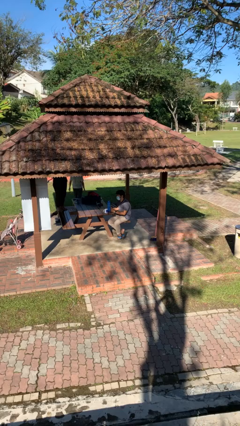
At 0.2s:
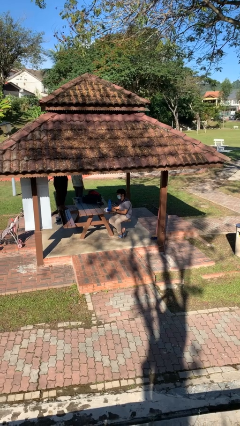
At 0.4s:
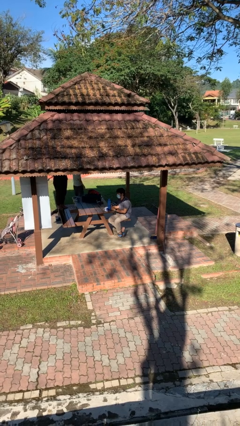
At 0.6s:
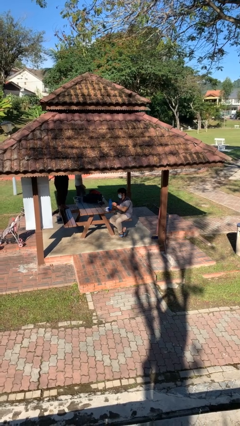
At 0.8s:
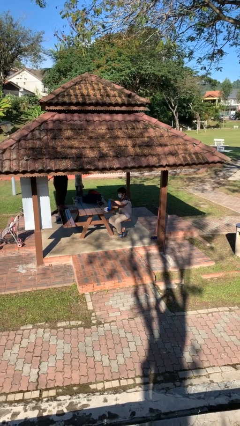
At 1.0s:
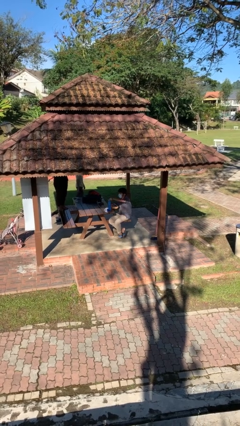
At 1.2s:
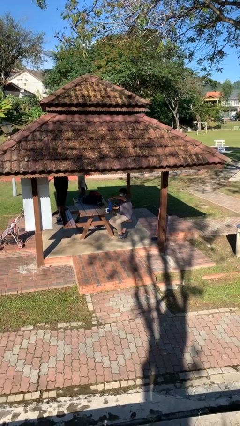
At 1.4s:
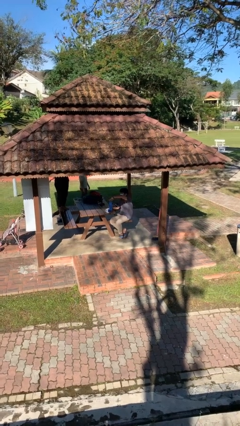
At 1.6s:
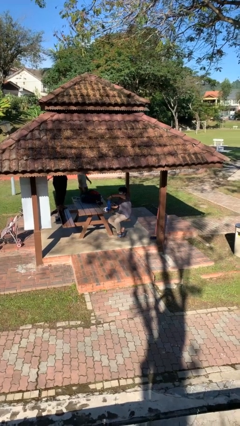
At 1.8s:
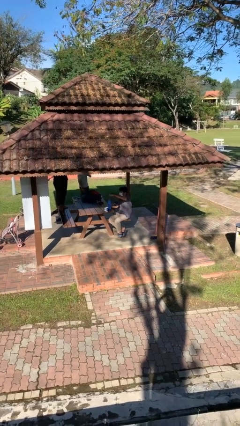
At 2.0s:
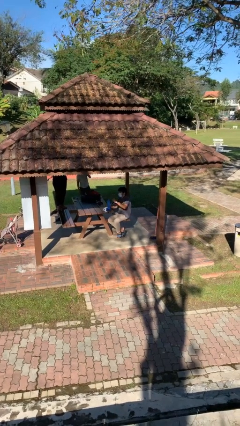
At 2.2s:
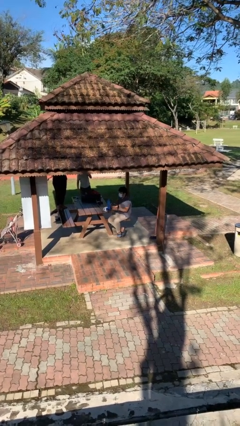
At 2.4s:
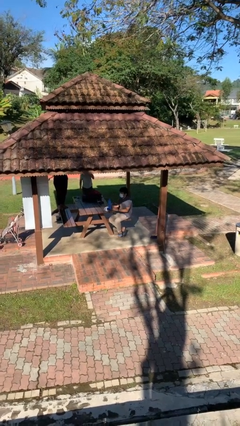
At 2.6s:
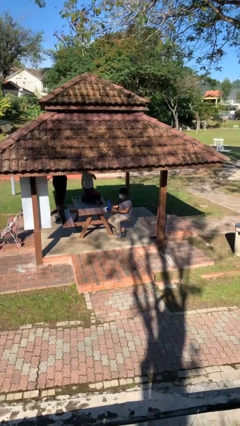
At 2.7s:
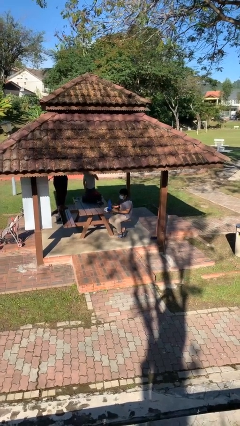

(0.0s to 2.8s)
person unscrews lid from bottle

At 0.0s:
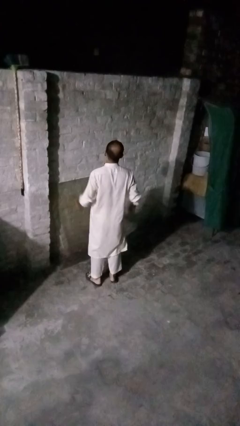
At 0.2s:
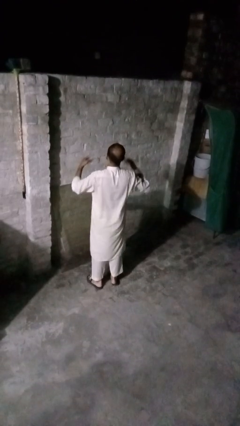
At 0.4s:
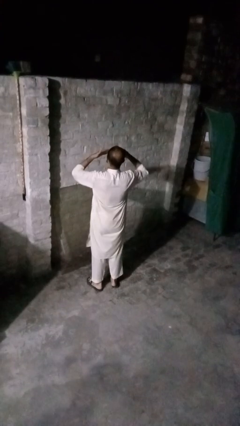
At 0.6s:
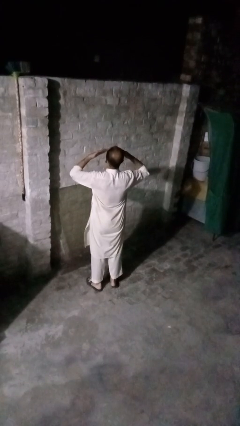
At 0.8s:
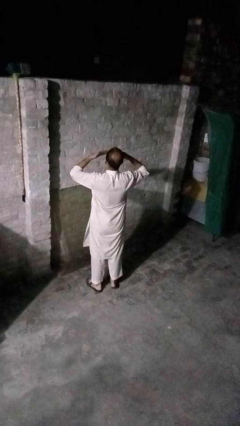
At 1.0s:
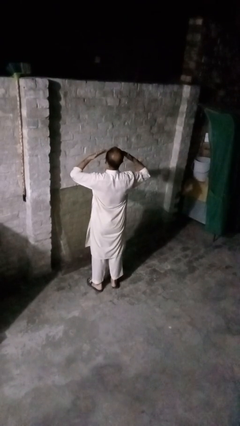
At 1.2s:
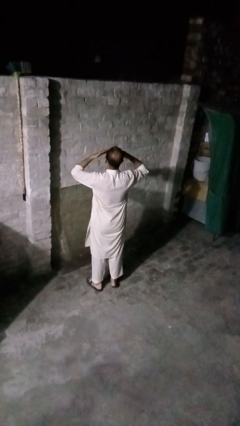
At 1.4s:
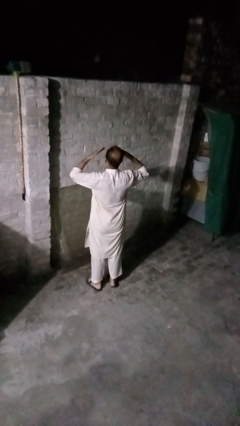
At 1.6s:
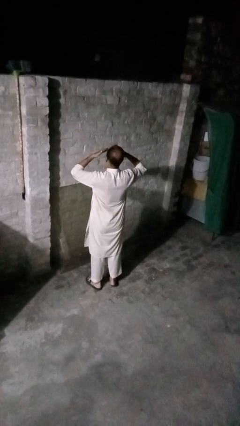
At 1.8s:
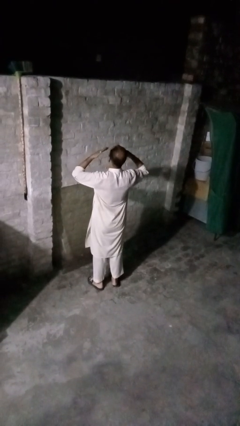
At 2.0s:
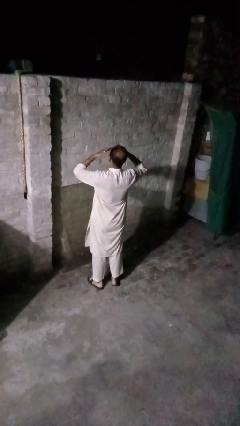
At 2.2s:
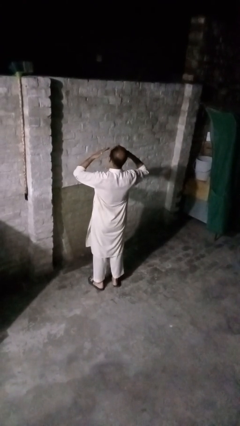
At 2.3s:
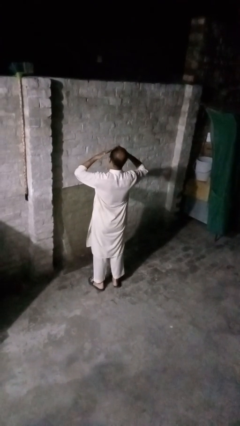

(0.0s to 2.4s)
person rubs eyes

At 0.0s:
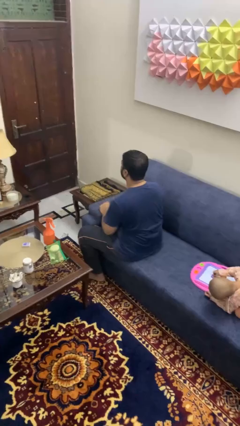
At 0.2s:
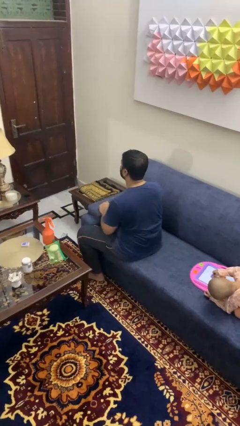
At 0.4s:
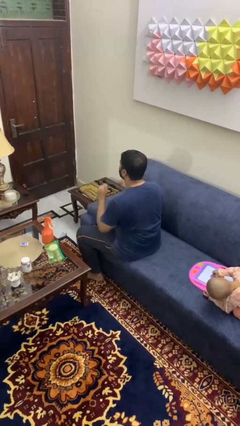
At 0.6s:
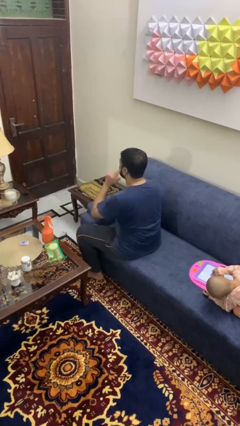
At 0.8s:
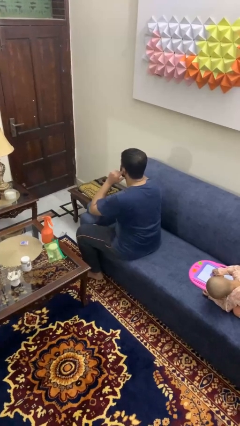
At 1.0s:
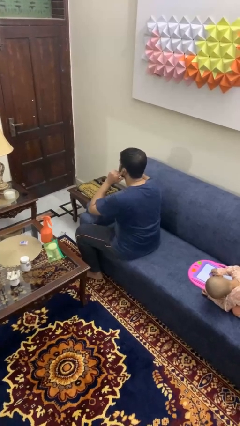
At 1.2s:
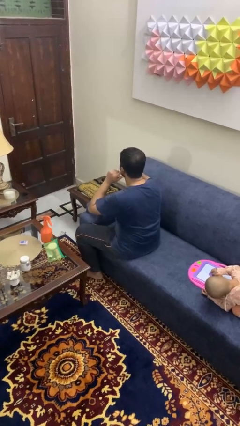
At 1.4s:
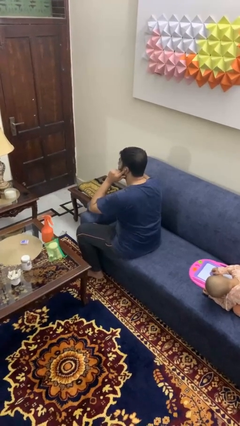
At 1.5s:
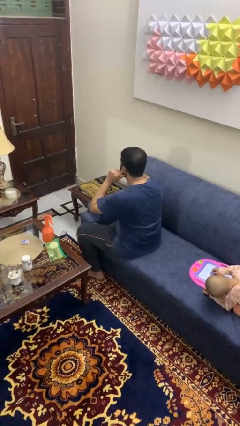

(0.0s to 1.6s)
person puts fingers in ear

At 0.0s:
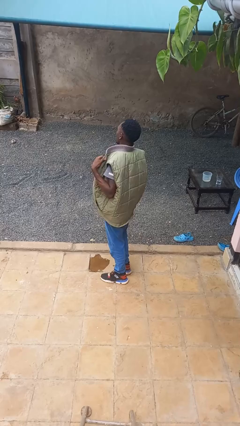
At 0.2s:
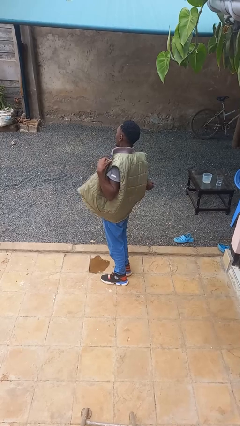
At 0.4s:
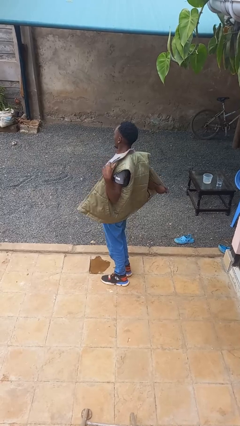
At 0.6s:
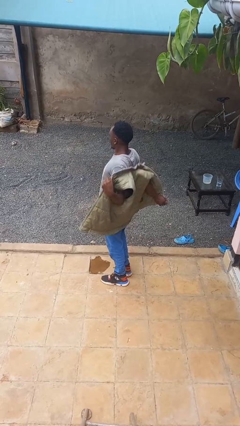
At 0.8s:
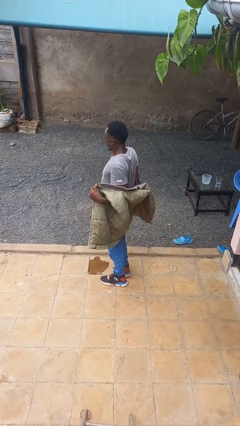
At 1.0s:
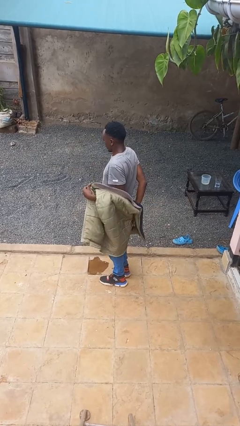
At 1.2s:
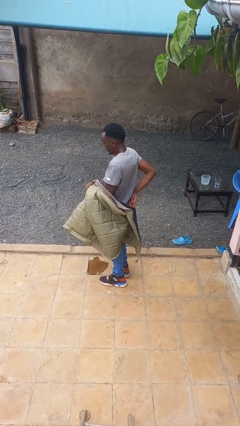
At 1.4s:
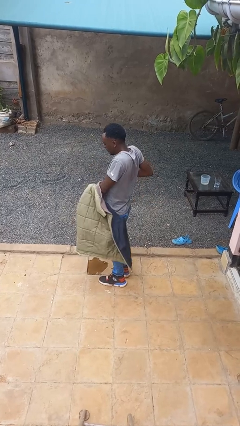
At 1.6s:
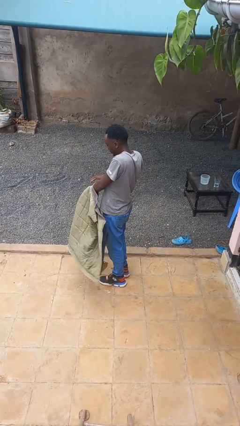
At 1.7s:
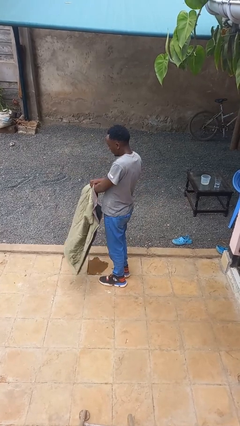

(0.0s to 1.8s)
person takes off jacket

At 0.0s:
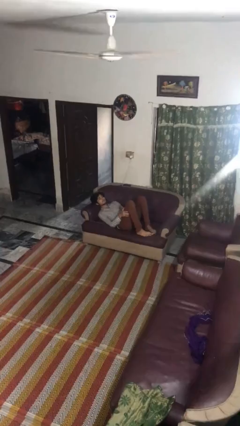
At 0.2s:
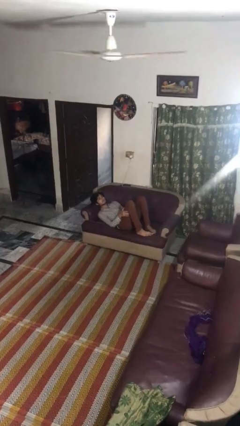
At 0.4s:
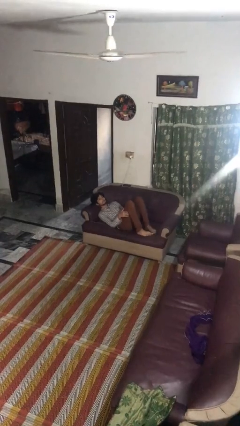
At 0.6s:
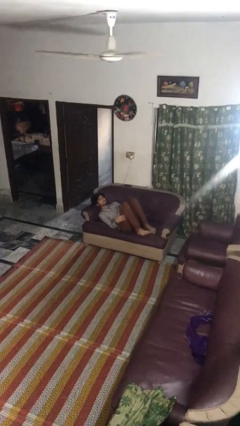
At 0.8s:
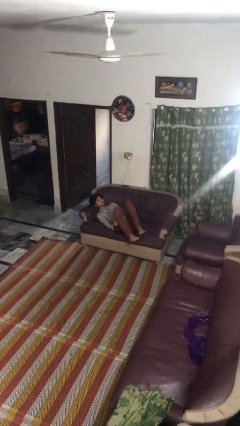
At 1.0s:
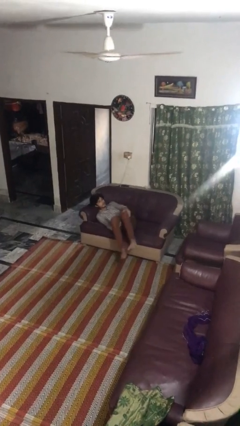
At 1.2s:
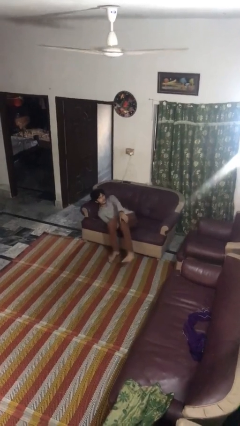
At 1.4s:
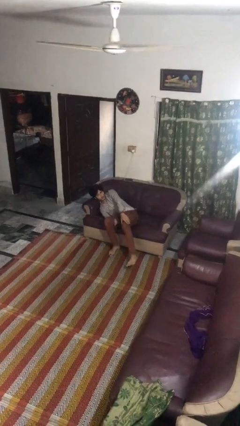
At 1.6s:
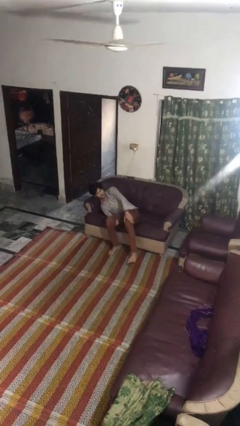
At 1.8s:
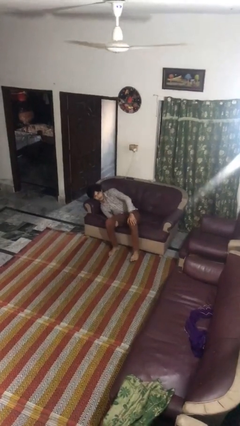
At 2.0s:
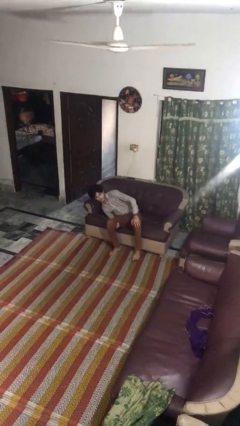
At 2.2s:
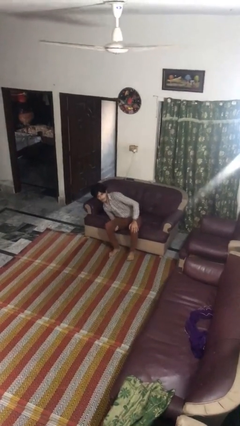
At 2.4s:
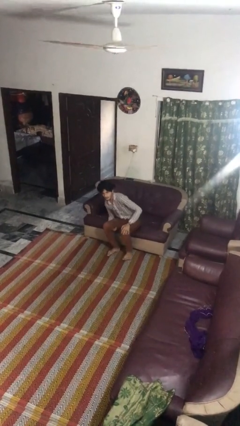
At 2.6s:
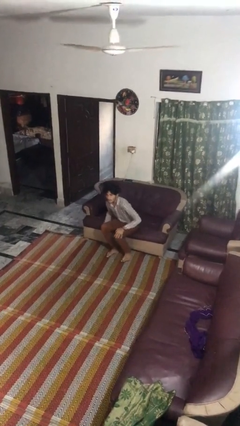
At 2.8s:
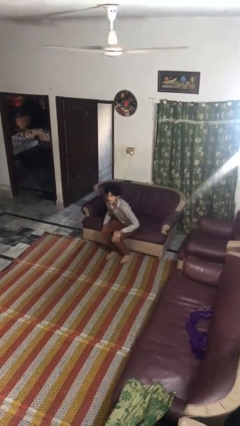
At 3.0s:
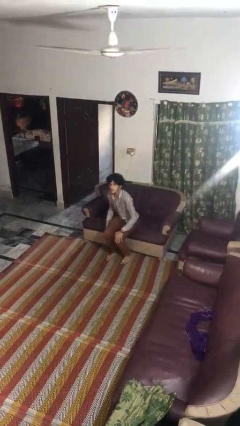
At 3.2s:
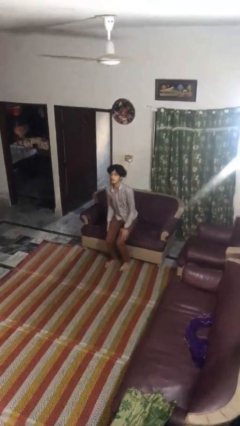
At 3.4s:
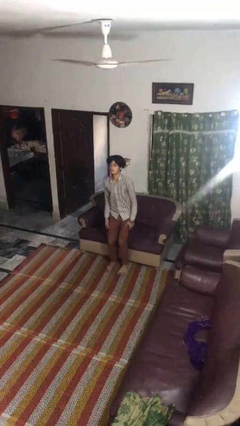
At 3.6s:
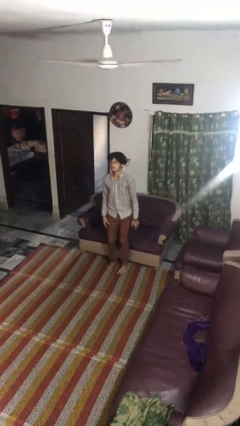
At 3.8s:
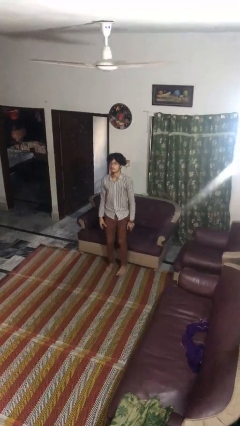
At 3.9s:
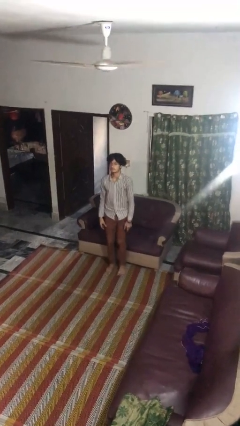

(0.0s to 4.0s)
person stands up

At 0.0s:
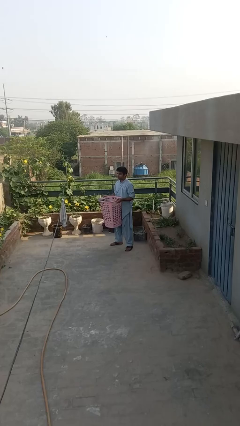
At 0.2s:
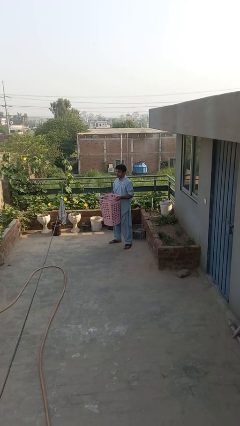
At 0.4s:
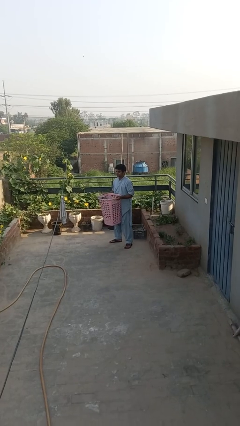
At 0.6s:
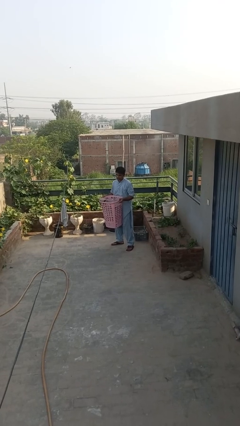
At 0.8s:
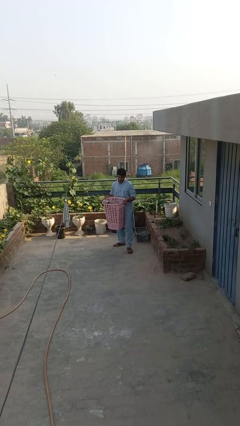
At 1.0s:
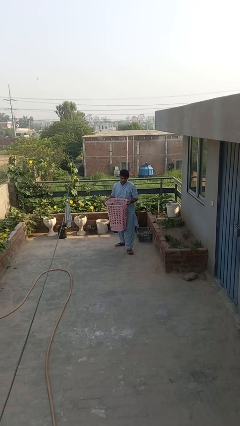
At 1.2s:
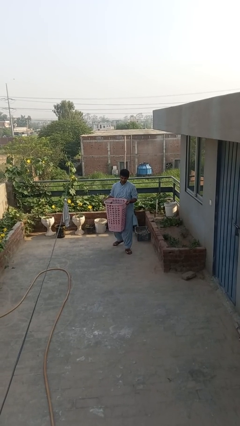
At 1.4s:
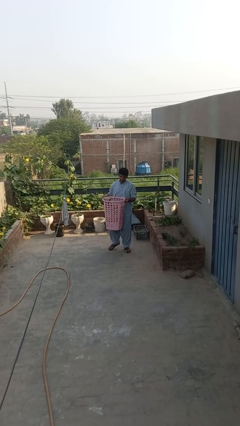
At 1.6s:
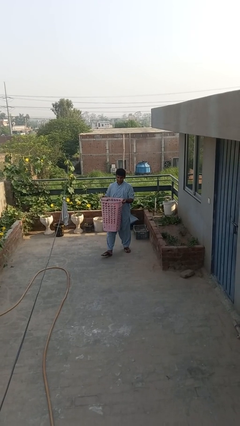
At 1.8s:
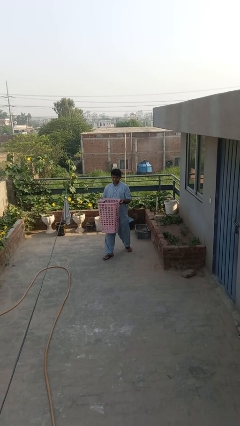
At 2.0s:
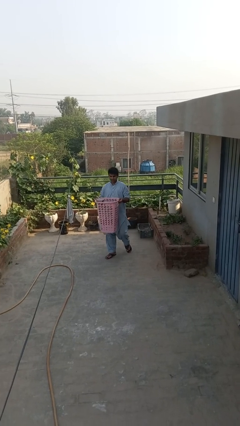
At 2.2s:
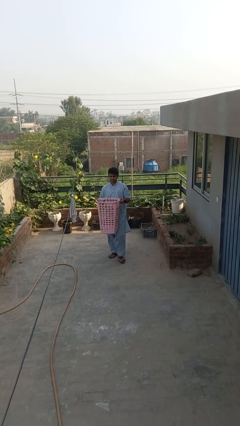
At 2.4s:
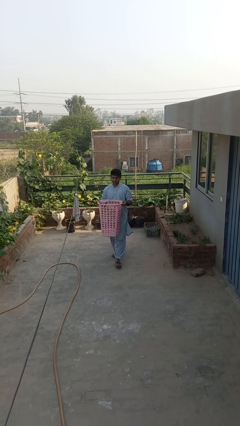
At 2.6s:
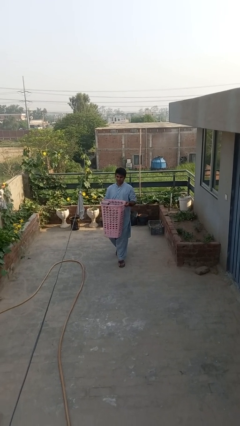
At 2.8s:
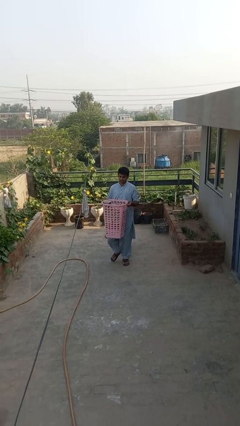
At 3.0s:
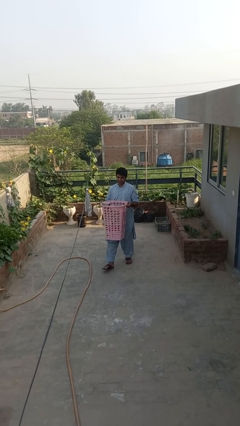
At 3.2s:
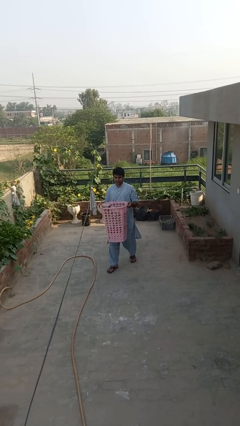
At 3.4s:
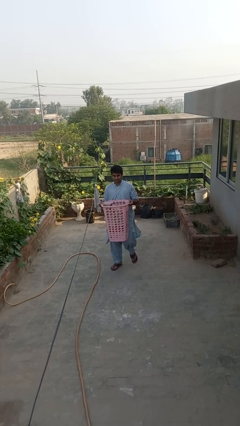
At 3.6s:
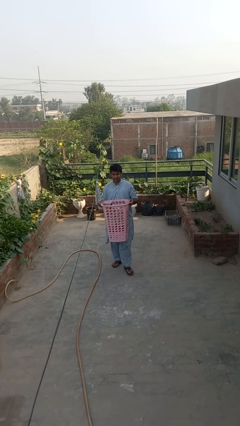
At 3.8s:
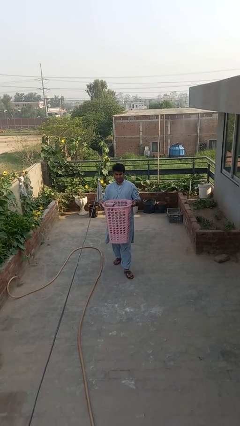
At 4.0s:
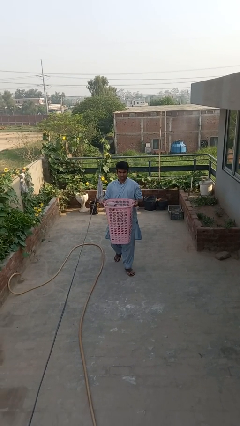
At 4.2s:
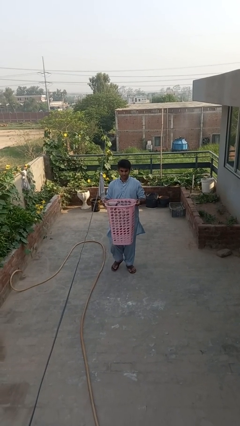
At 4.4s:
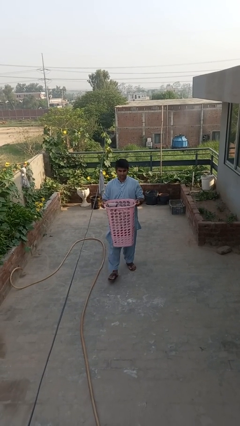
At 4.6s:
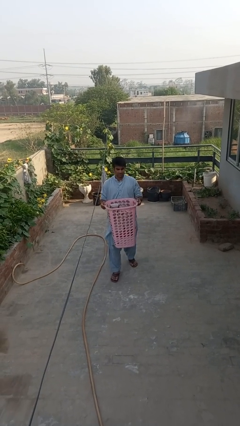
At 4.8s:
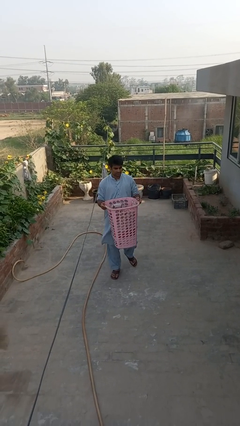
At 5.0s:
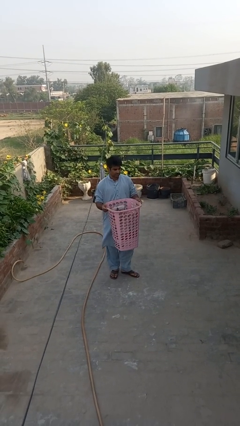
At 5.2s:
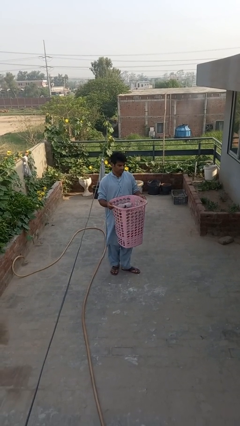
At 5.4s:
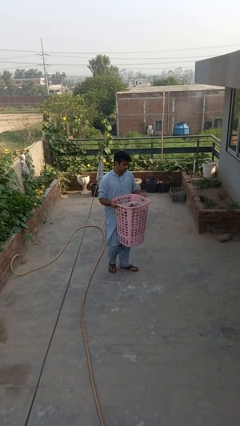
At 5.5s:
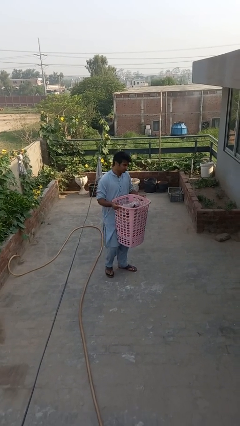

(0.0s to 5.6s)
person carries laundry basket
